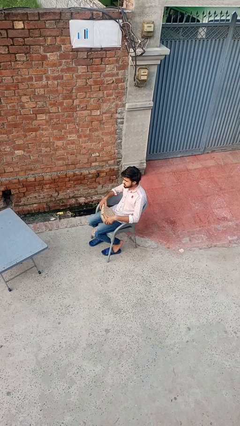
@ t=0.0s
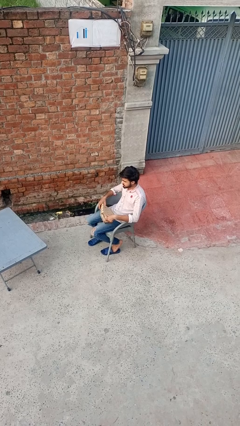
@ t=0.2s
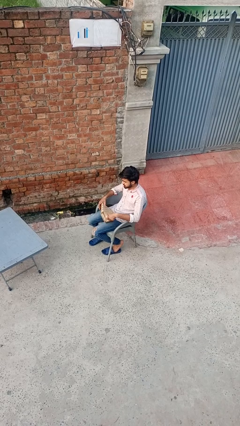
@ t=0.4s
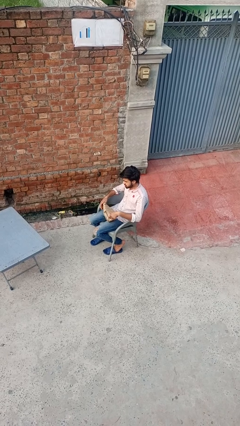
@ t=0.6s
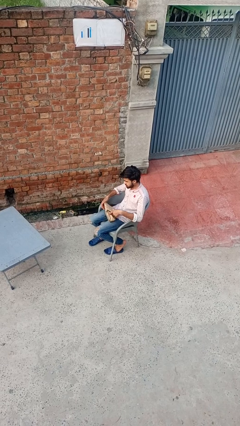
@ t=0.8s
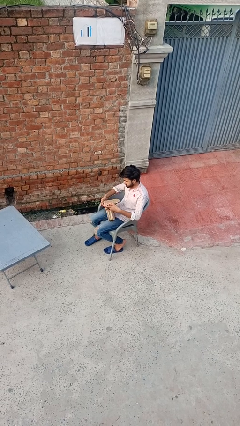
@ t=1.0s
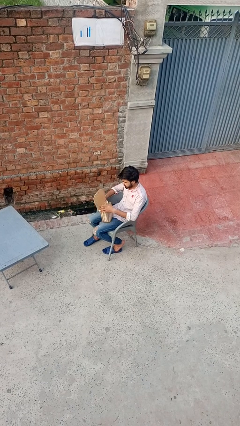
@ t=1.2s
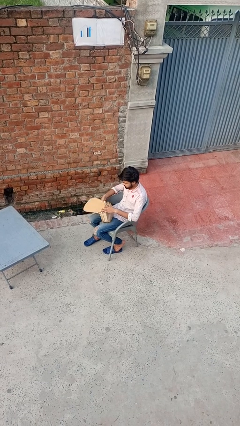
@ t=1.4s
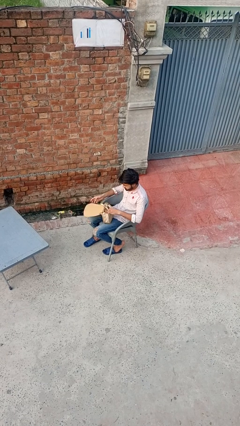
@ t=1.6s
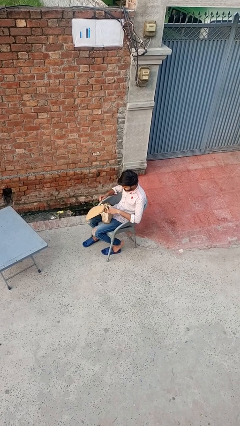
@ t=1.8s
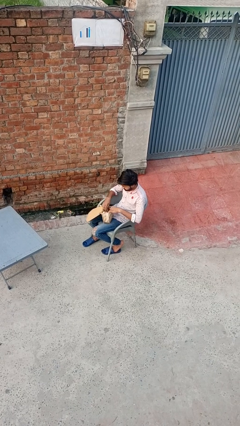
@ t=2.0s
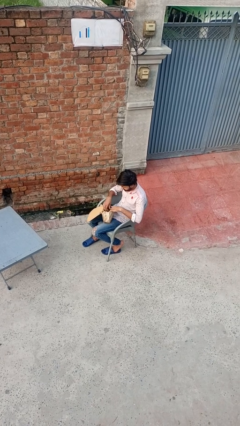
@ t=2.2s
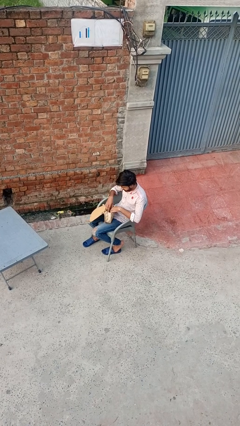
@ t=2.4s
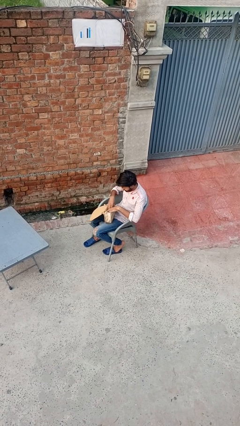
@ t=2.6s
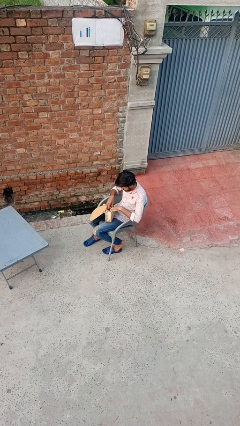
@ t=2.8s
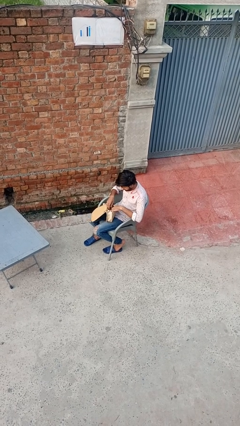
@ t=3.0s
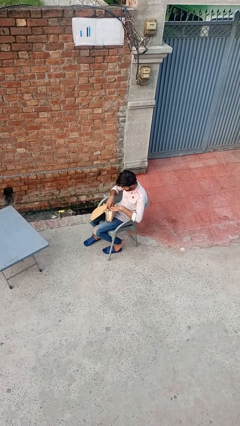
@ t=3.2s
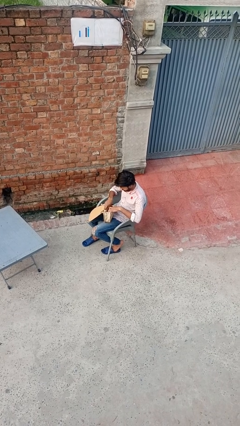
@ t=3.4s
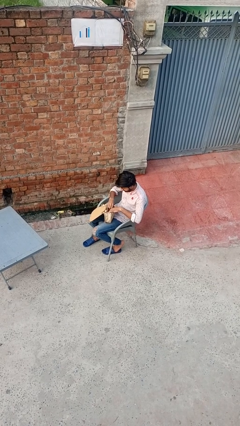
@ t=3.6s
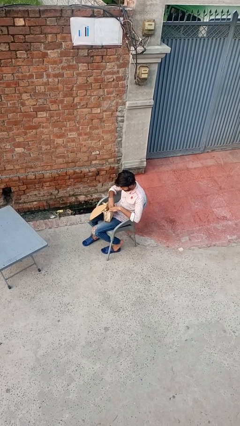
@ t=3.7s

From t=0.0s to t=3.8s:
person searches in purse

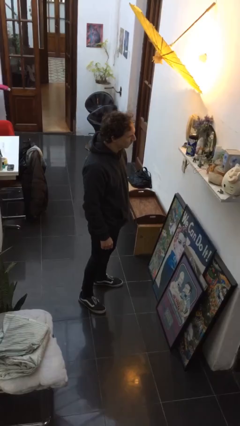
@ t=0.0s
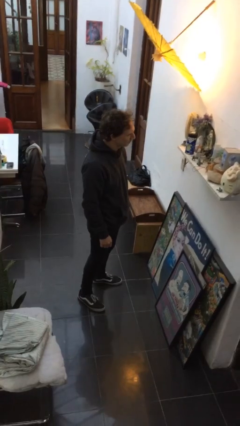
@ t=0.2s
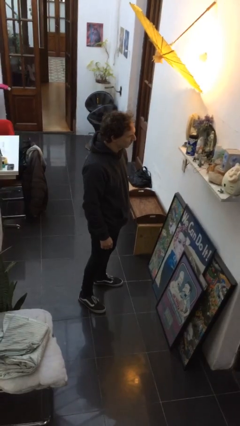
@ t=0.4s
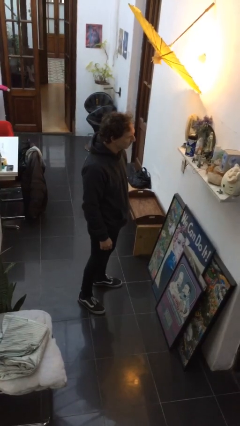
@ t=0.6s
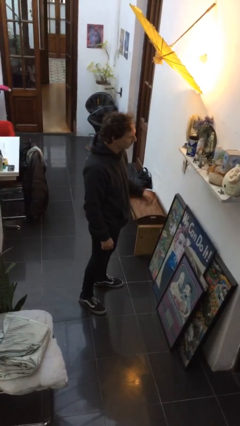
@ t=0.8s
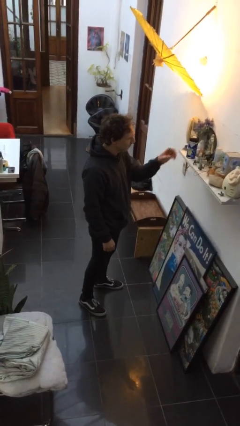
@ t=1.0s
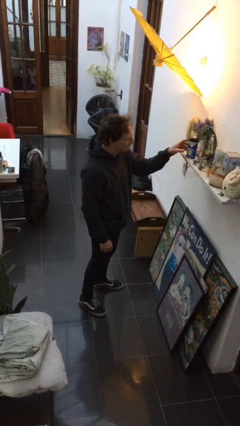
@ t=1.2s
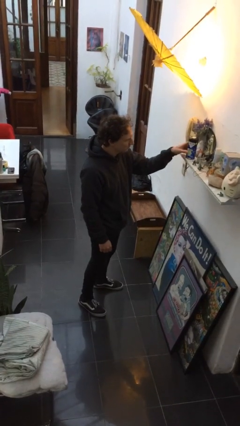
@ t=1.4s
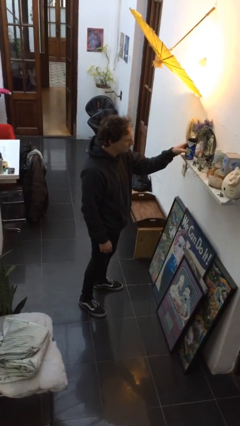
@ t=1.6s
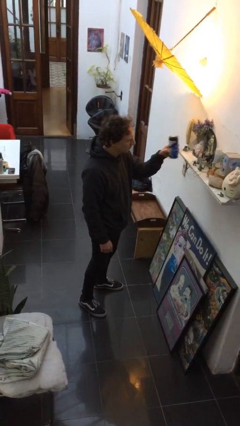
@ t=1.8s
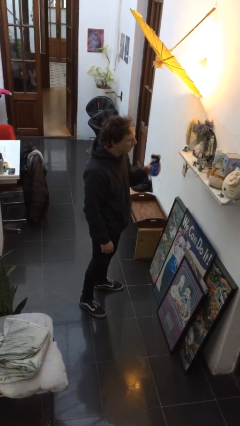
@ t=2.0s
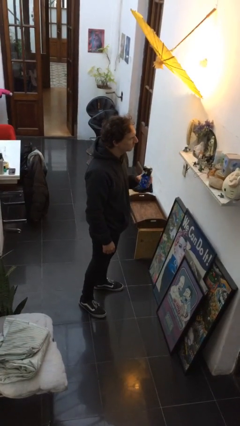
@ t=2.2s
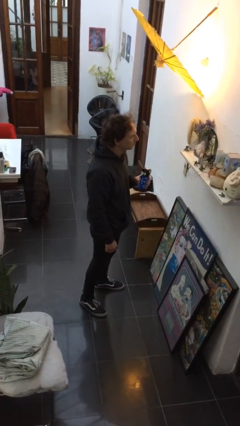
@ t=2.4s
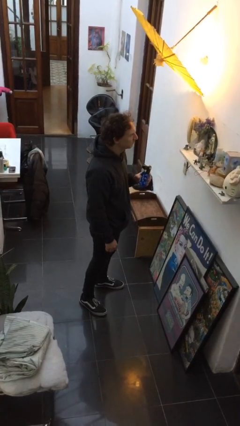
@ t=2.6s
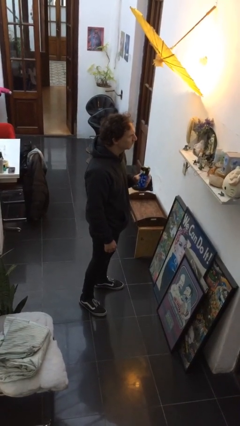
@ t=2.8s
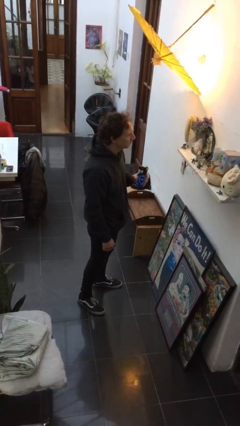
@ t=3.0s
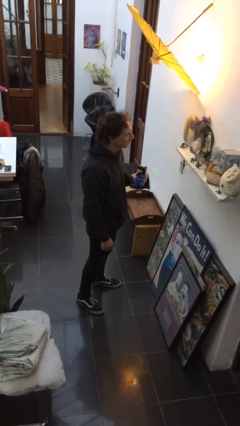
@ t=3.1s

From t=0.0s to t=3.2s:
person picks up object from shelf

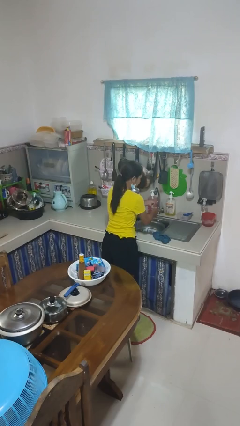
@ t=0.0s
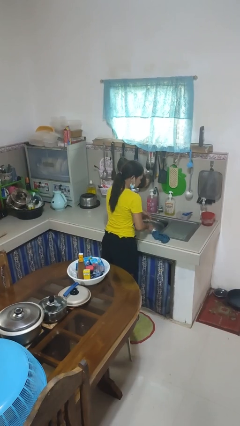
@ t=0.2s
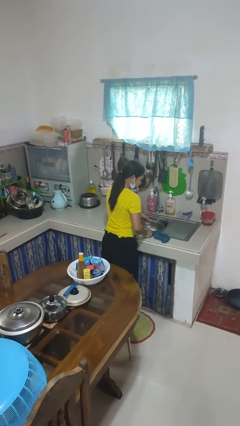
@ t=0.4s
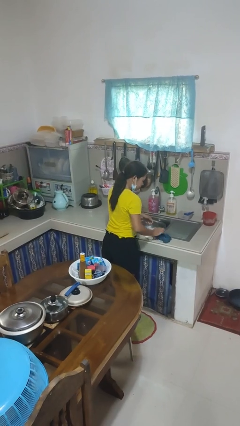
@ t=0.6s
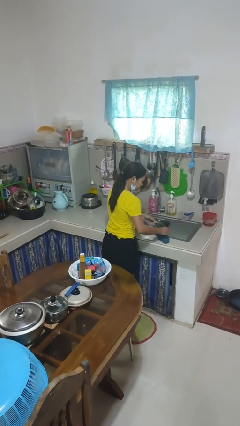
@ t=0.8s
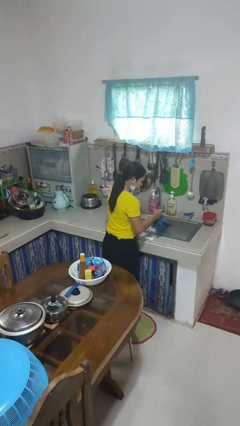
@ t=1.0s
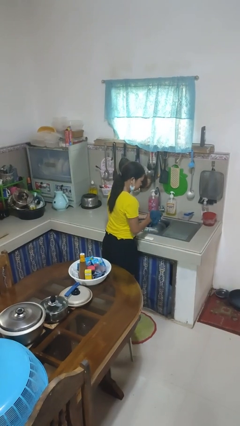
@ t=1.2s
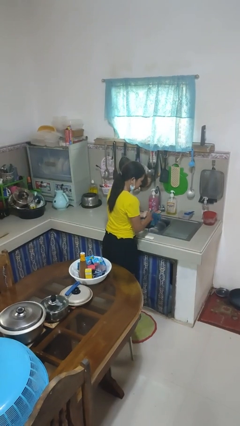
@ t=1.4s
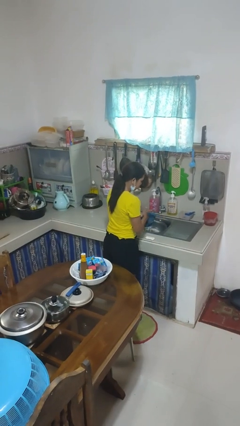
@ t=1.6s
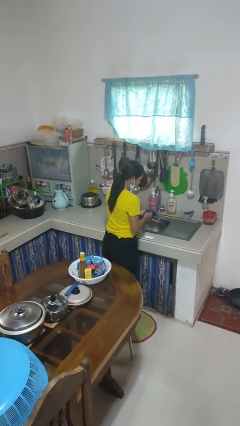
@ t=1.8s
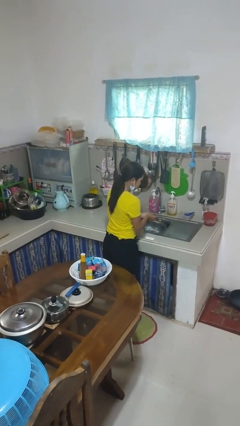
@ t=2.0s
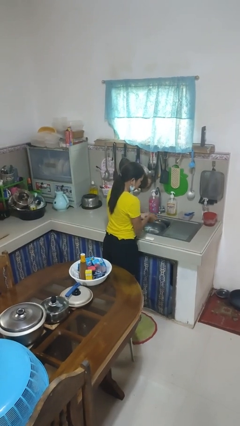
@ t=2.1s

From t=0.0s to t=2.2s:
person dries hands with towel

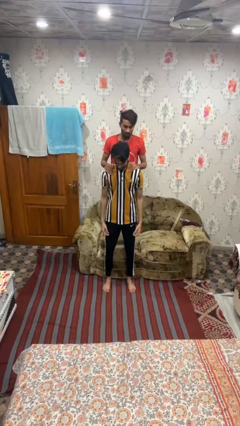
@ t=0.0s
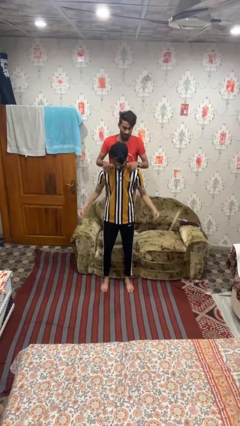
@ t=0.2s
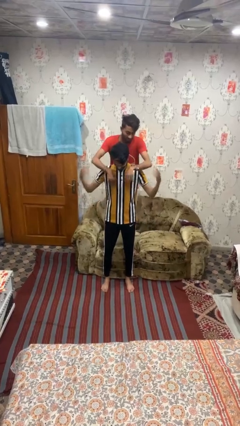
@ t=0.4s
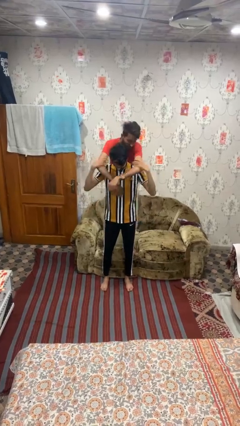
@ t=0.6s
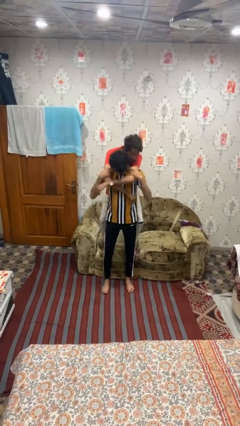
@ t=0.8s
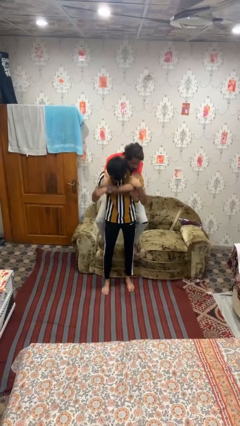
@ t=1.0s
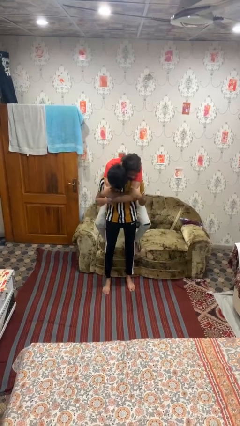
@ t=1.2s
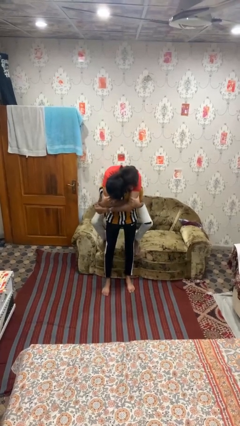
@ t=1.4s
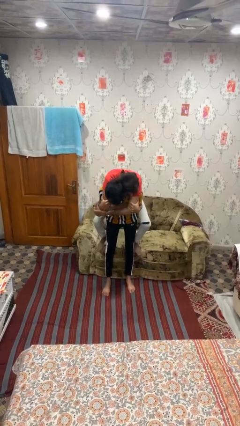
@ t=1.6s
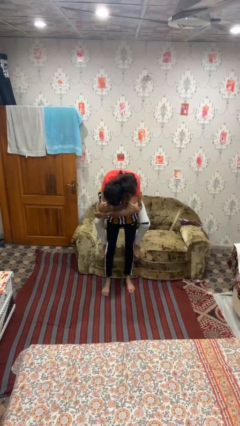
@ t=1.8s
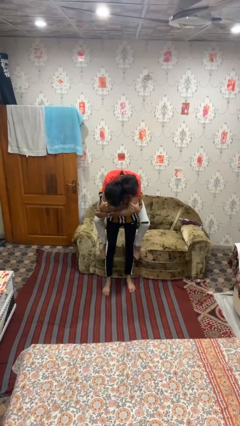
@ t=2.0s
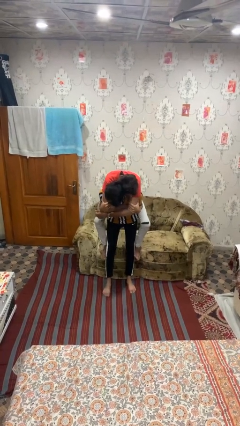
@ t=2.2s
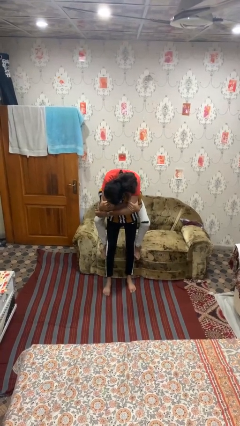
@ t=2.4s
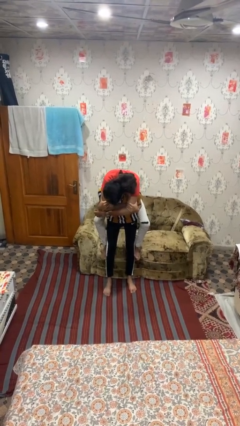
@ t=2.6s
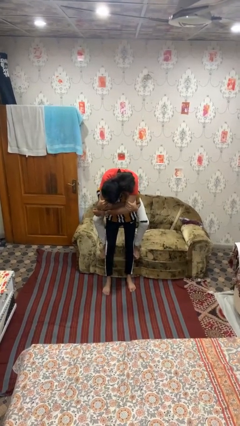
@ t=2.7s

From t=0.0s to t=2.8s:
person carries person on back

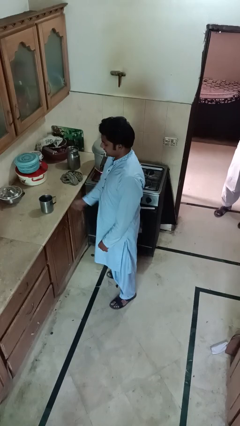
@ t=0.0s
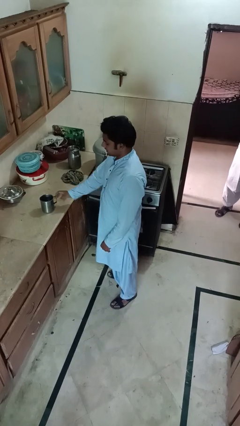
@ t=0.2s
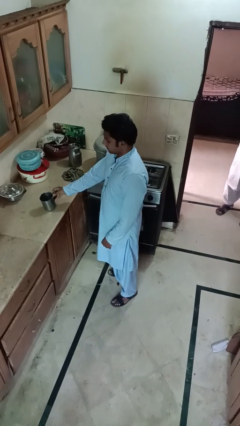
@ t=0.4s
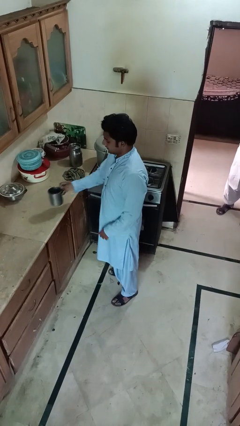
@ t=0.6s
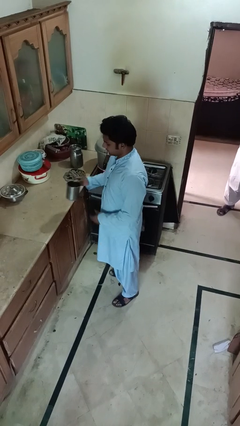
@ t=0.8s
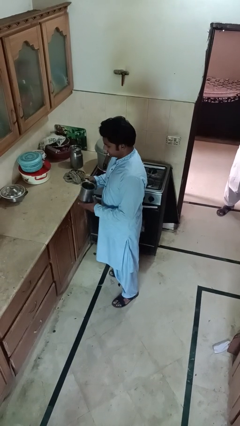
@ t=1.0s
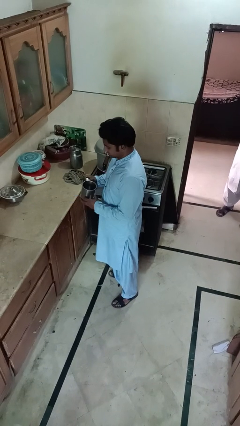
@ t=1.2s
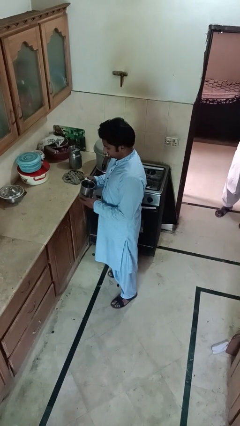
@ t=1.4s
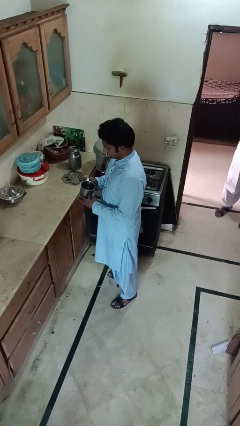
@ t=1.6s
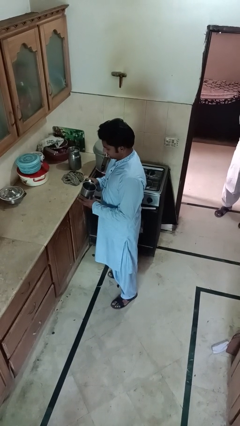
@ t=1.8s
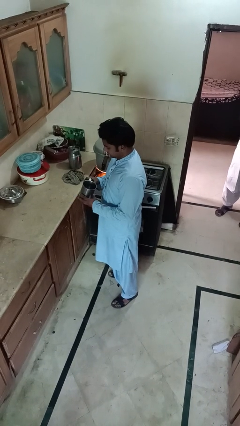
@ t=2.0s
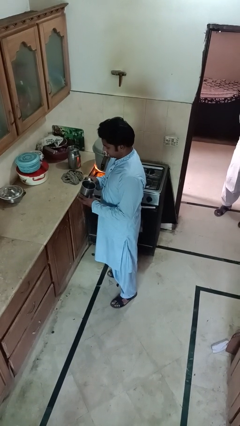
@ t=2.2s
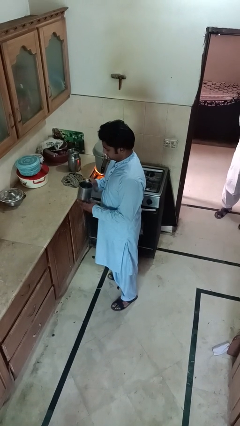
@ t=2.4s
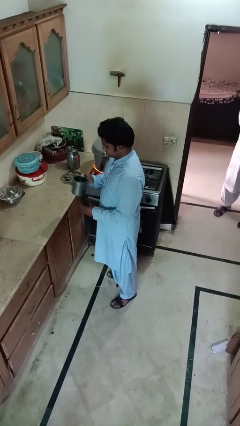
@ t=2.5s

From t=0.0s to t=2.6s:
person picks up object from countertop

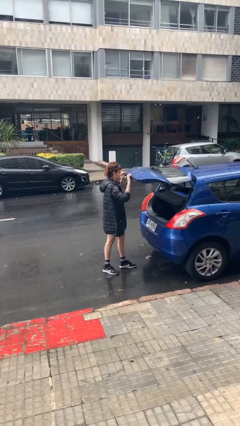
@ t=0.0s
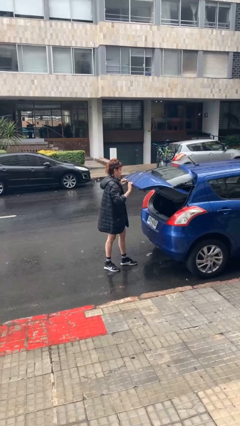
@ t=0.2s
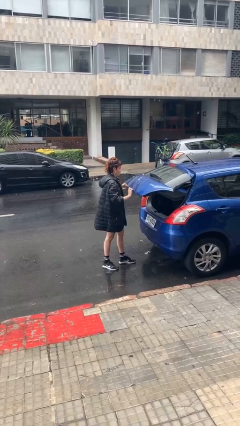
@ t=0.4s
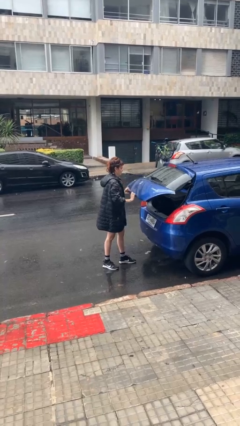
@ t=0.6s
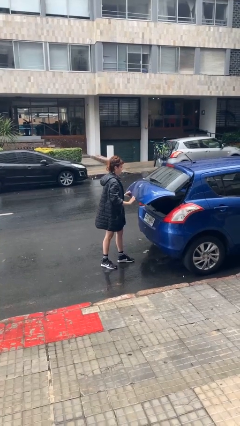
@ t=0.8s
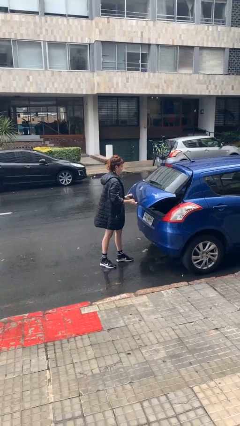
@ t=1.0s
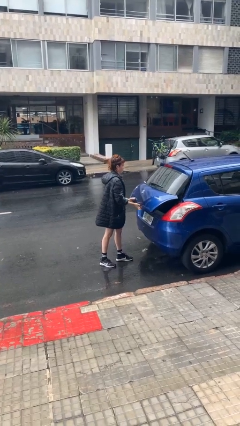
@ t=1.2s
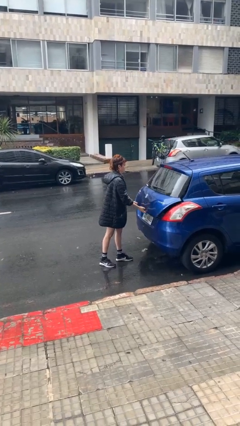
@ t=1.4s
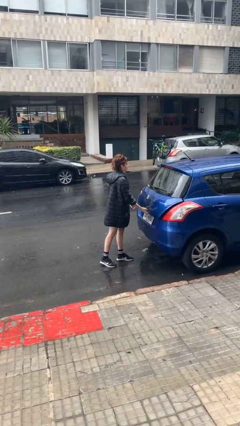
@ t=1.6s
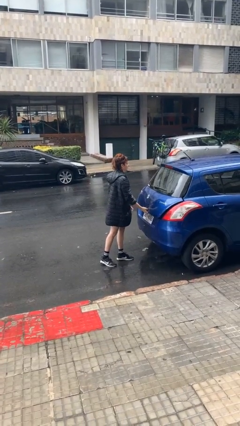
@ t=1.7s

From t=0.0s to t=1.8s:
person closes car trunk

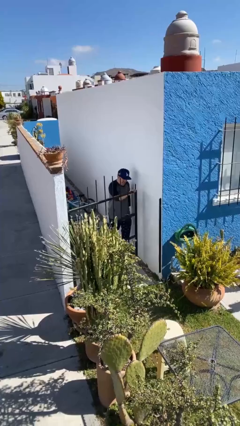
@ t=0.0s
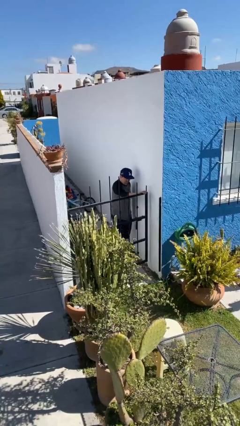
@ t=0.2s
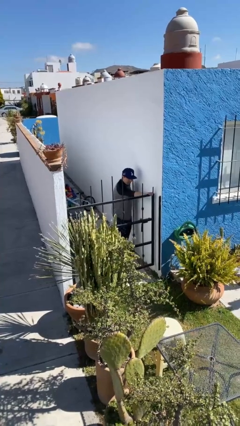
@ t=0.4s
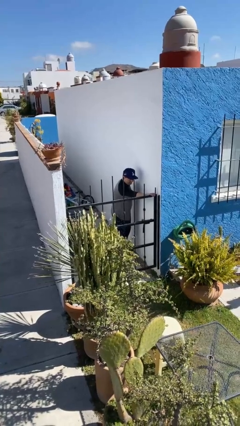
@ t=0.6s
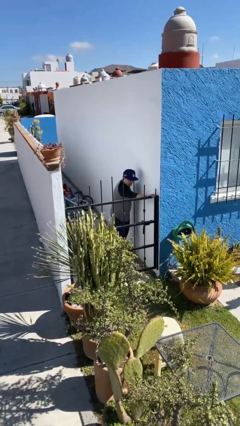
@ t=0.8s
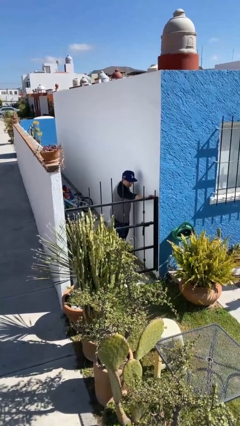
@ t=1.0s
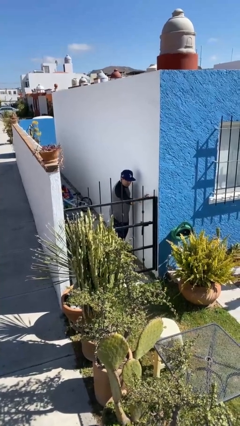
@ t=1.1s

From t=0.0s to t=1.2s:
person closes facility door
